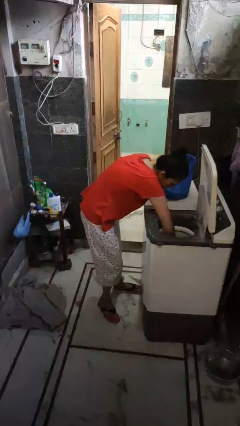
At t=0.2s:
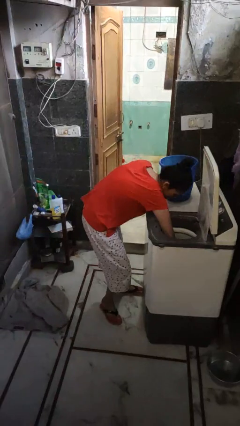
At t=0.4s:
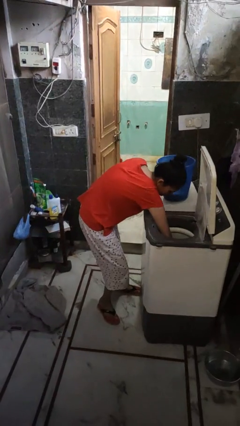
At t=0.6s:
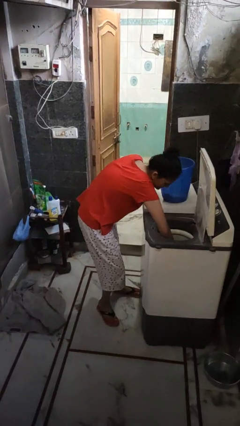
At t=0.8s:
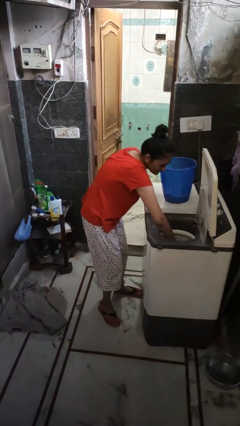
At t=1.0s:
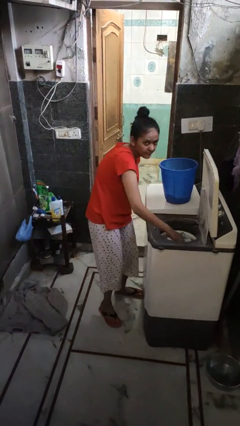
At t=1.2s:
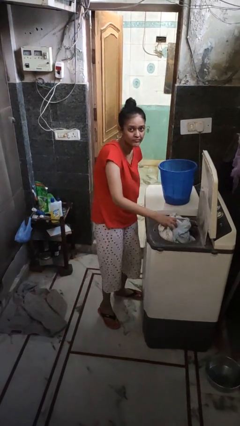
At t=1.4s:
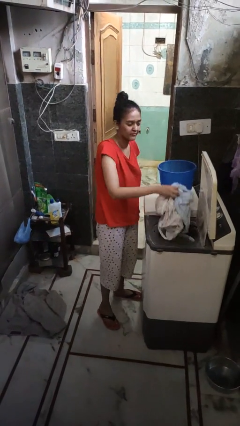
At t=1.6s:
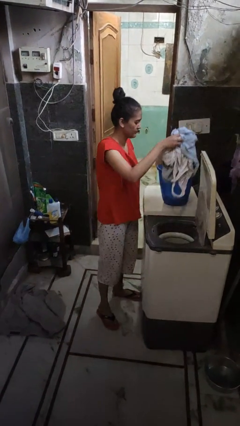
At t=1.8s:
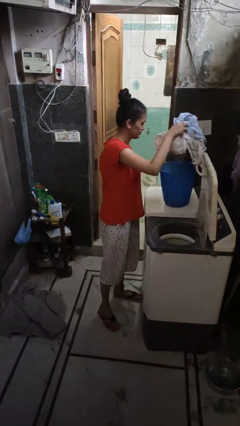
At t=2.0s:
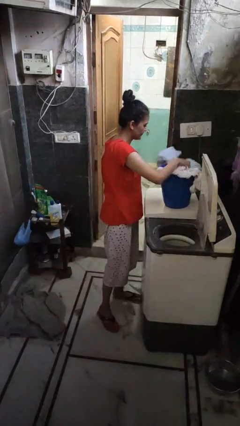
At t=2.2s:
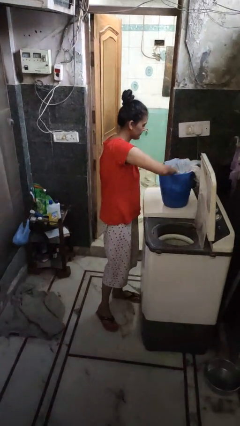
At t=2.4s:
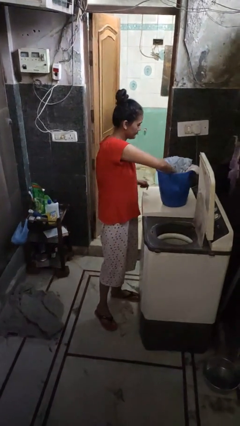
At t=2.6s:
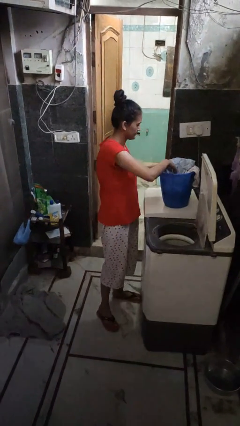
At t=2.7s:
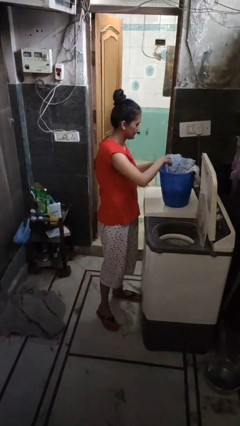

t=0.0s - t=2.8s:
person unloads clotheswasher

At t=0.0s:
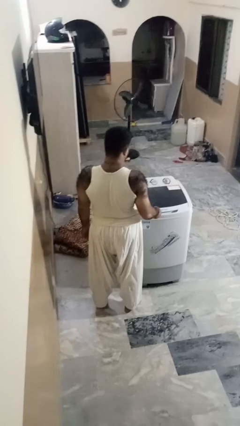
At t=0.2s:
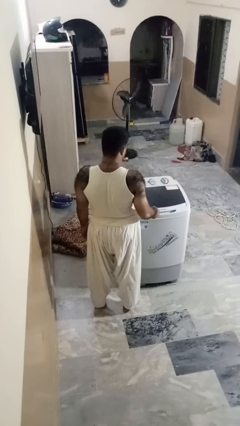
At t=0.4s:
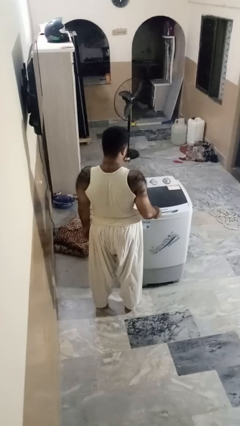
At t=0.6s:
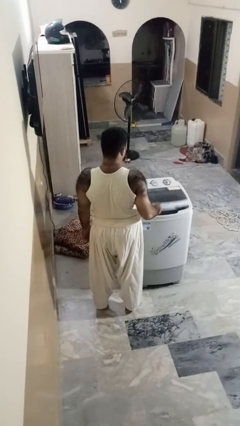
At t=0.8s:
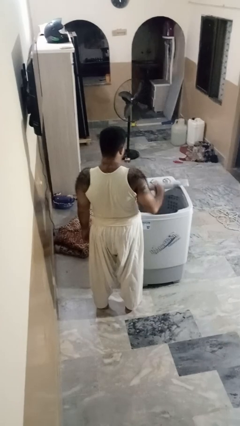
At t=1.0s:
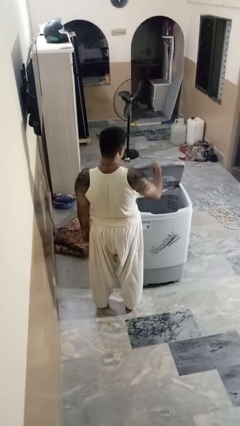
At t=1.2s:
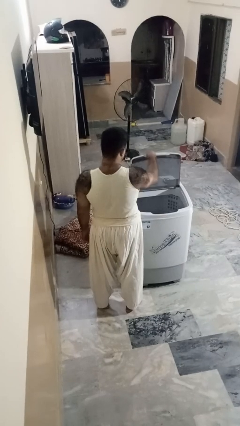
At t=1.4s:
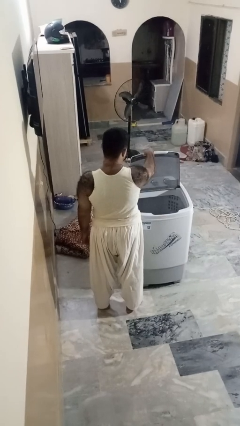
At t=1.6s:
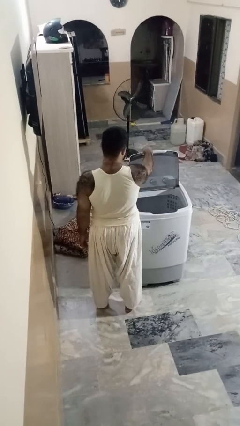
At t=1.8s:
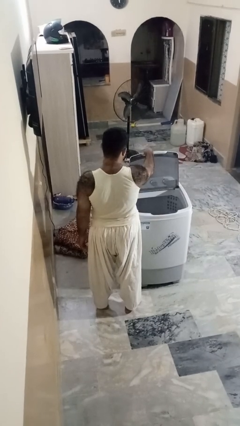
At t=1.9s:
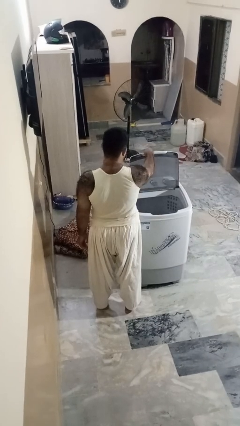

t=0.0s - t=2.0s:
person opens clothes washer

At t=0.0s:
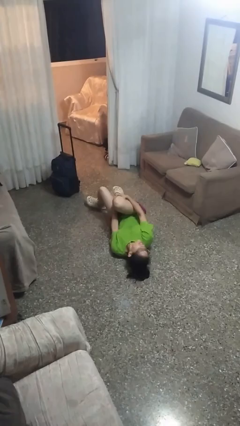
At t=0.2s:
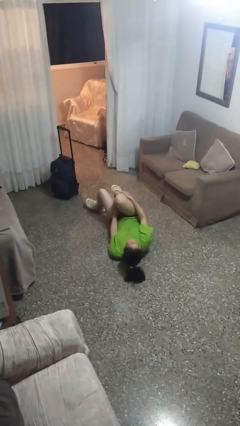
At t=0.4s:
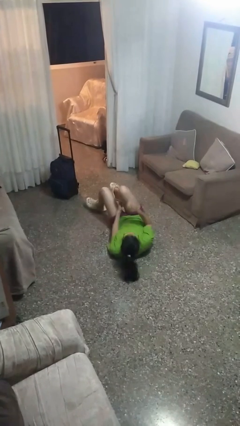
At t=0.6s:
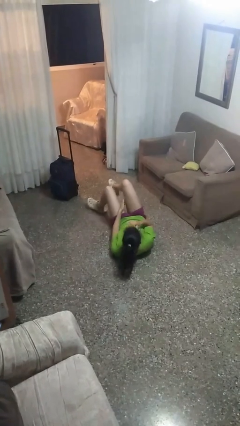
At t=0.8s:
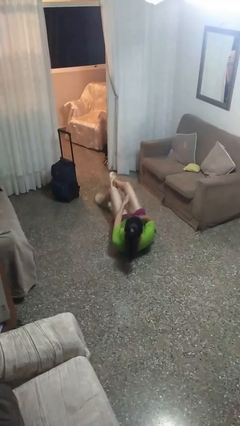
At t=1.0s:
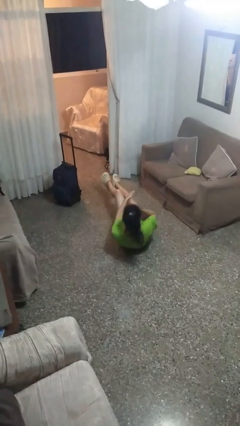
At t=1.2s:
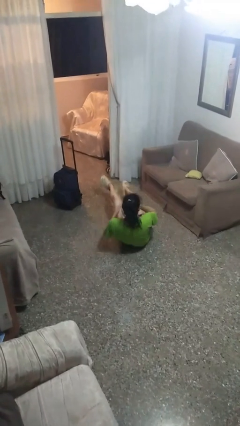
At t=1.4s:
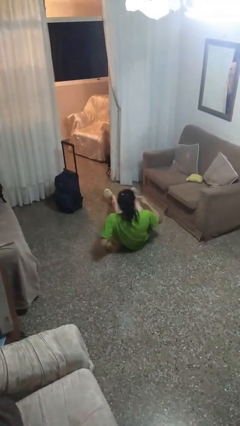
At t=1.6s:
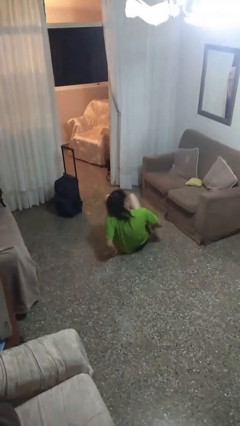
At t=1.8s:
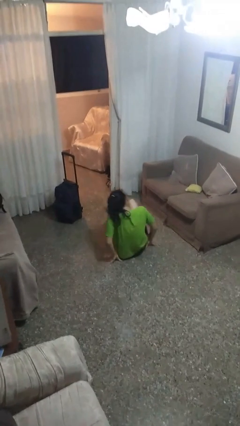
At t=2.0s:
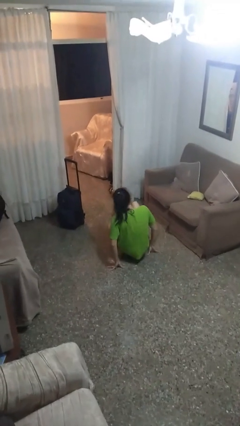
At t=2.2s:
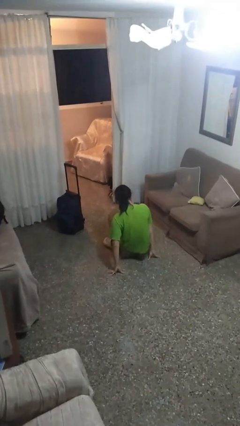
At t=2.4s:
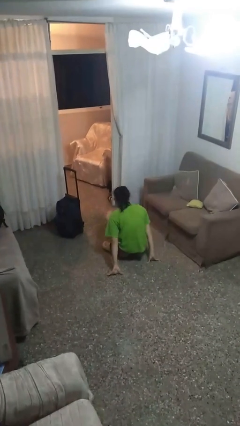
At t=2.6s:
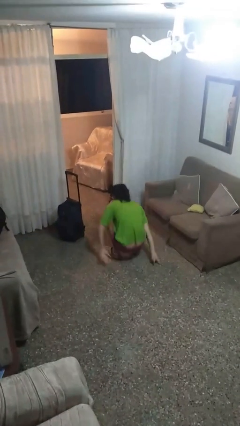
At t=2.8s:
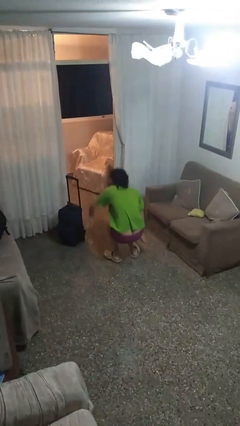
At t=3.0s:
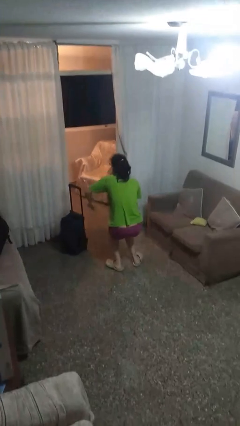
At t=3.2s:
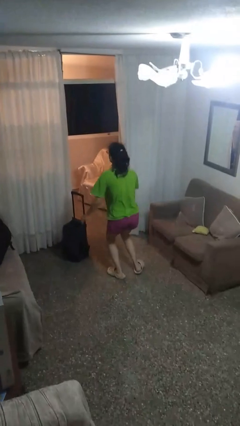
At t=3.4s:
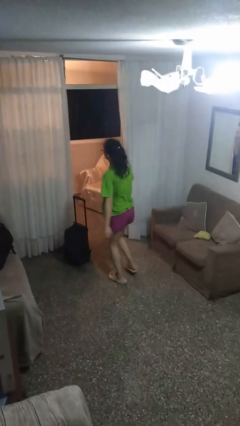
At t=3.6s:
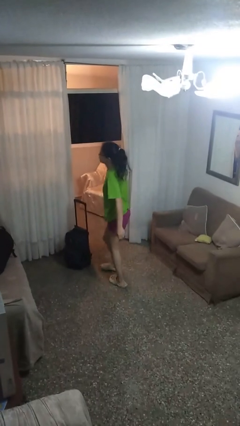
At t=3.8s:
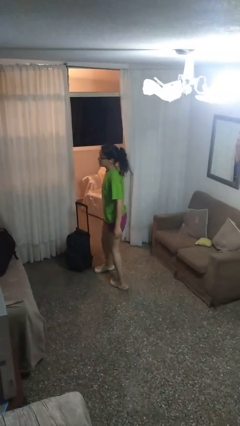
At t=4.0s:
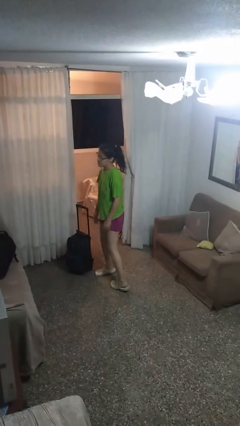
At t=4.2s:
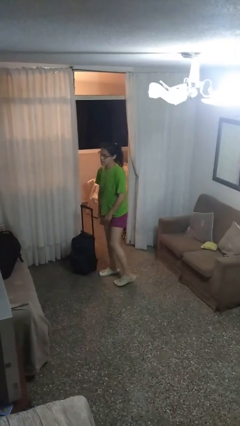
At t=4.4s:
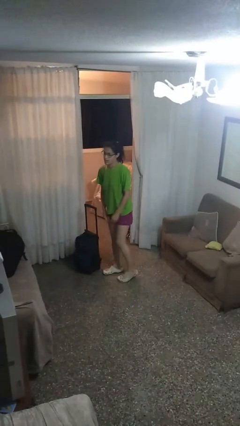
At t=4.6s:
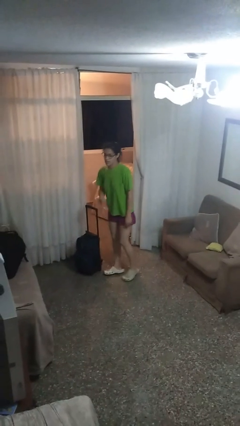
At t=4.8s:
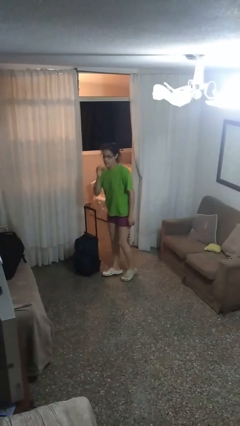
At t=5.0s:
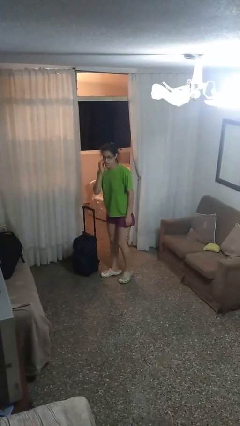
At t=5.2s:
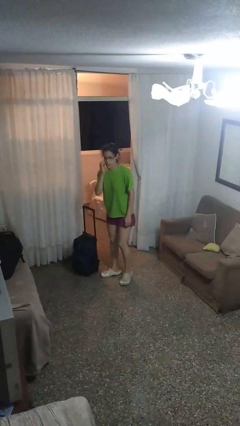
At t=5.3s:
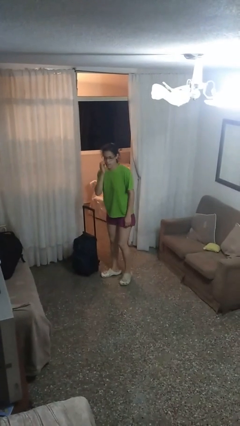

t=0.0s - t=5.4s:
person stands up from floor

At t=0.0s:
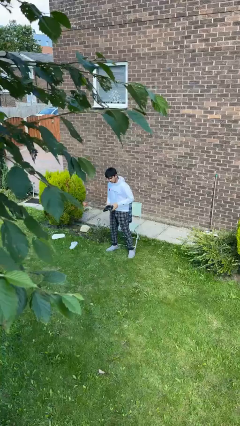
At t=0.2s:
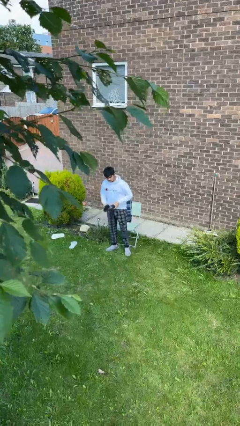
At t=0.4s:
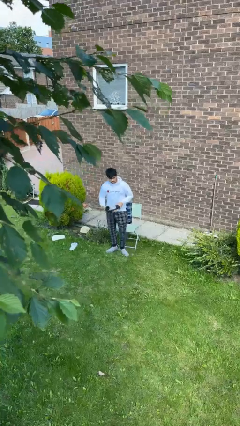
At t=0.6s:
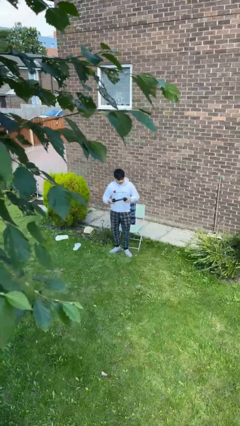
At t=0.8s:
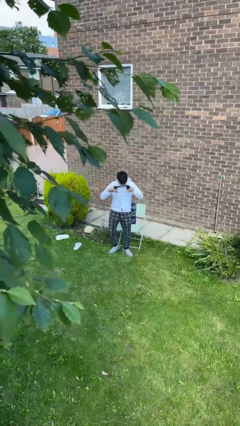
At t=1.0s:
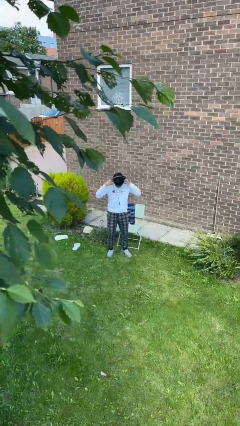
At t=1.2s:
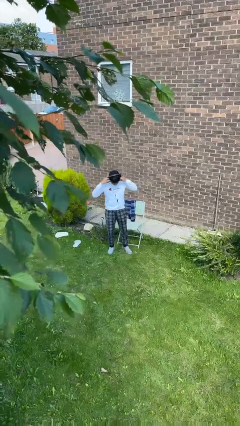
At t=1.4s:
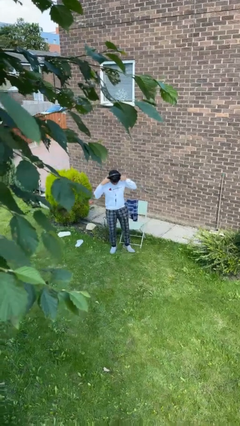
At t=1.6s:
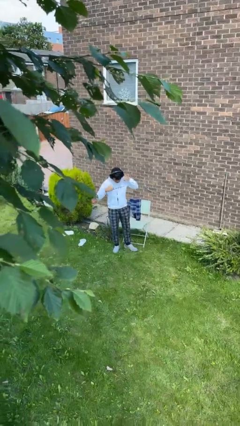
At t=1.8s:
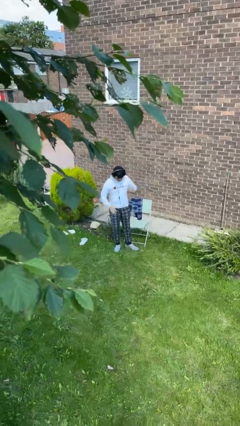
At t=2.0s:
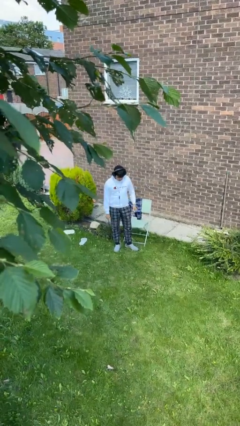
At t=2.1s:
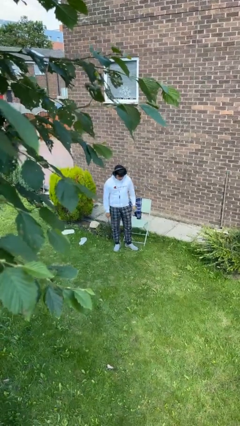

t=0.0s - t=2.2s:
person puts on headphones

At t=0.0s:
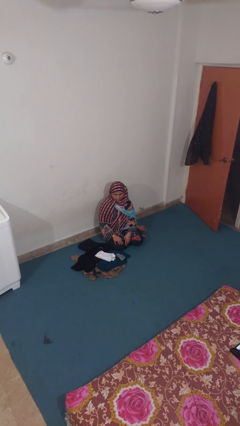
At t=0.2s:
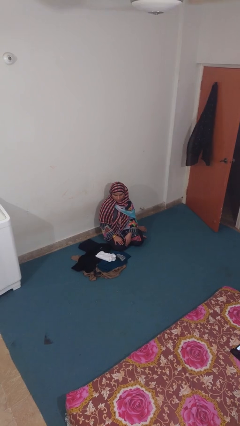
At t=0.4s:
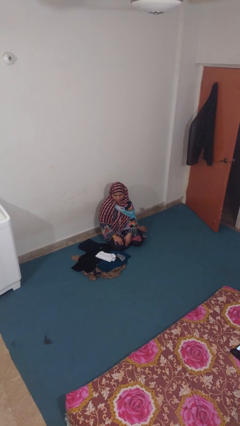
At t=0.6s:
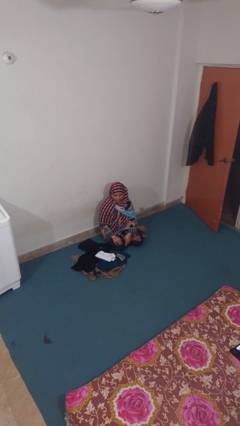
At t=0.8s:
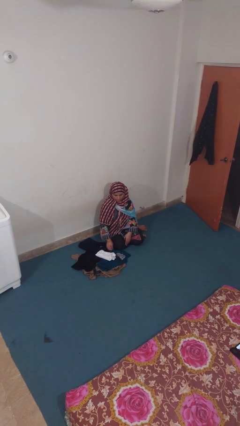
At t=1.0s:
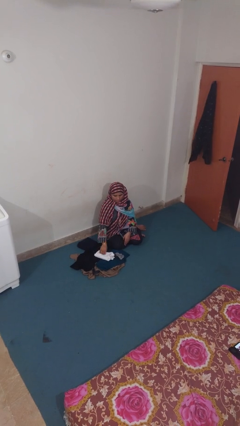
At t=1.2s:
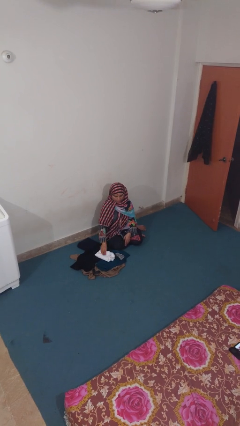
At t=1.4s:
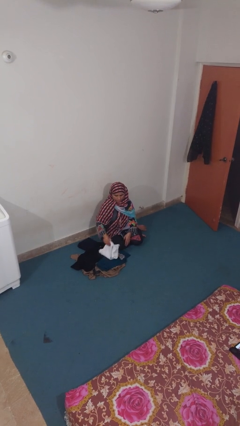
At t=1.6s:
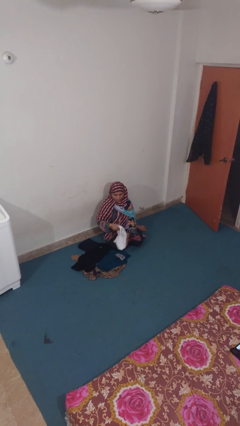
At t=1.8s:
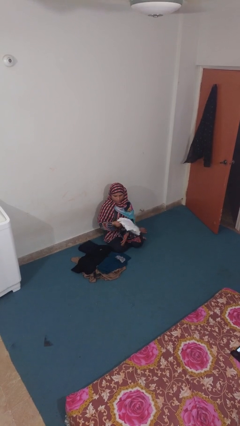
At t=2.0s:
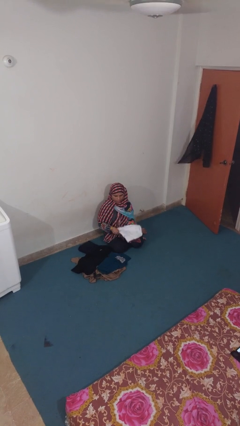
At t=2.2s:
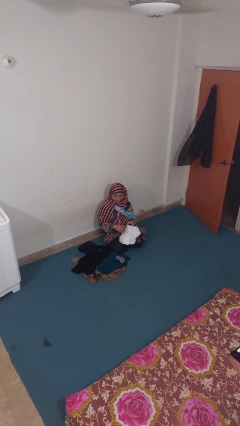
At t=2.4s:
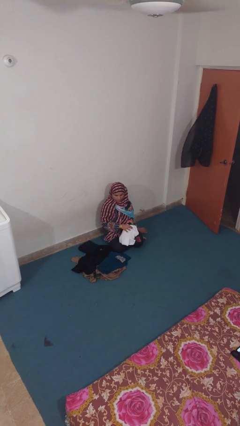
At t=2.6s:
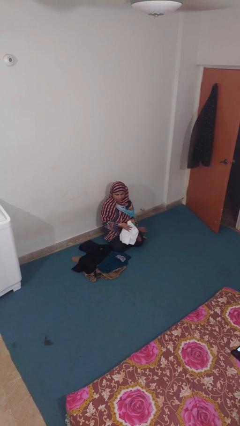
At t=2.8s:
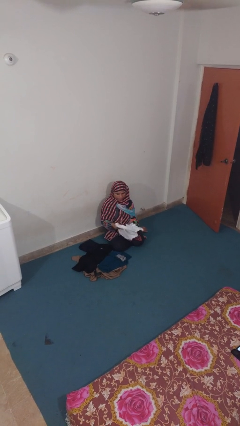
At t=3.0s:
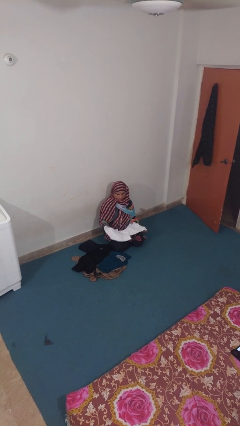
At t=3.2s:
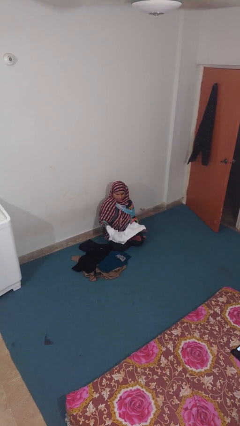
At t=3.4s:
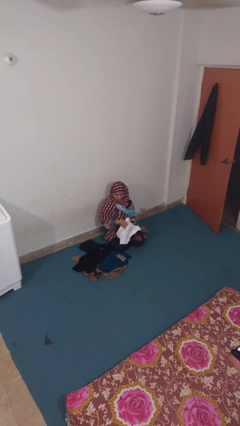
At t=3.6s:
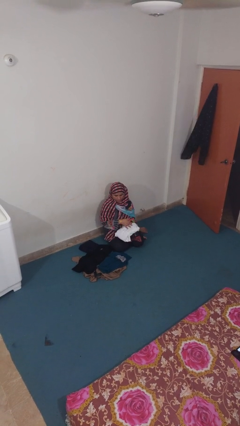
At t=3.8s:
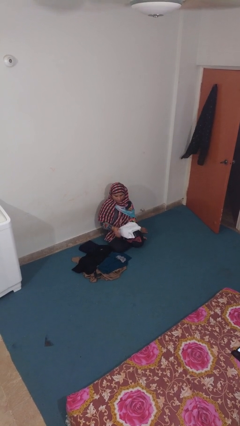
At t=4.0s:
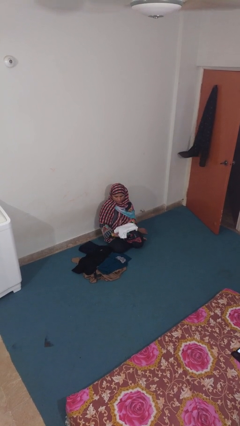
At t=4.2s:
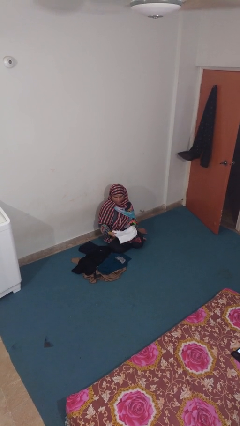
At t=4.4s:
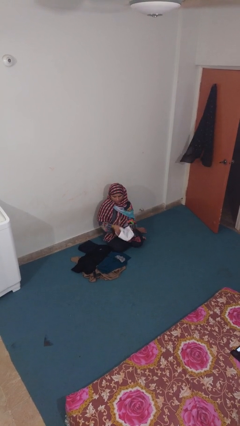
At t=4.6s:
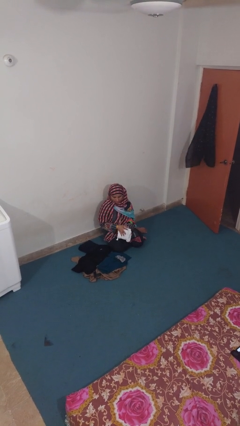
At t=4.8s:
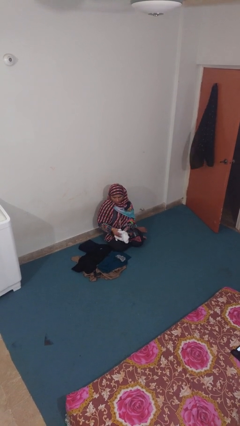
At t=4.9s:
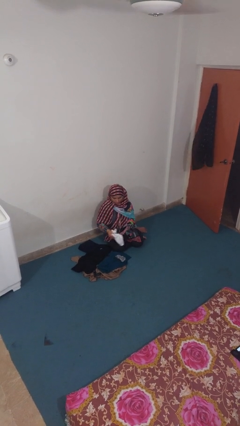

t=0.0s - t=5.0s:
person folds shirt
